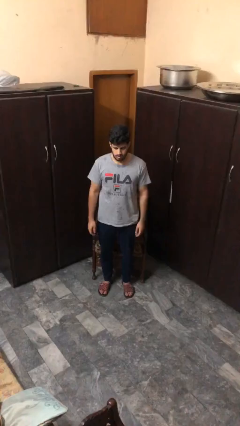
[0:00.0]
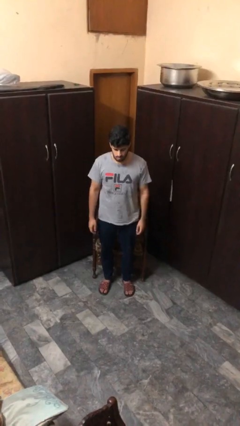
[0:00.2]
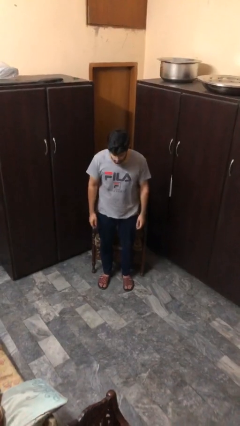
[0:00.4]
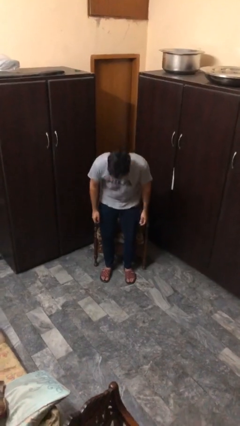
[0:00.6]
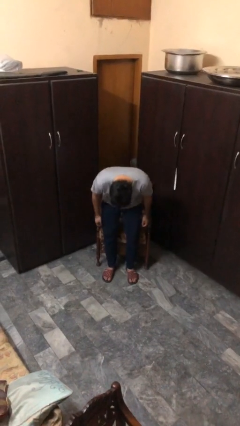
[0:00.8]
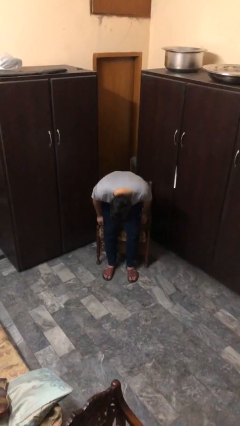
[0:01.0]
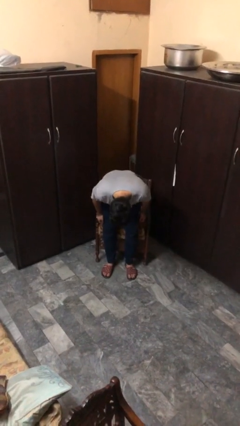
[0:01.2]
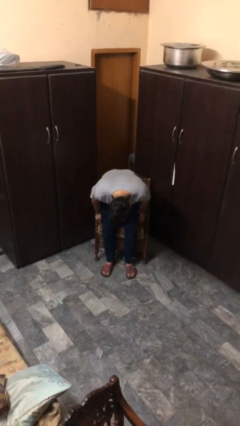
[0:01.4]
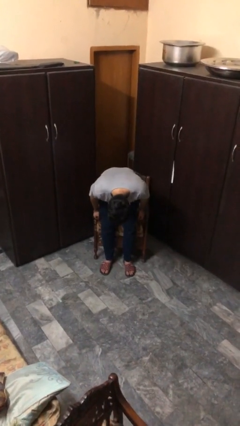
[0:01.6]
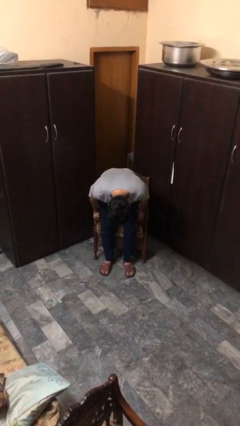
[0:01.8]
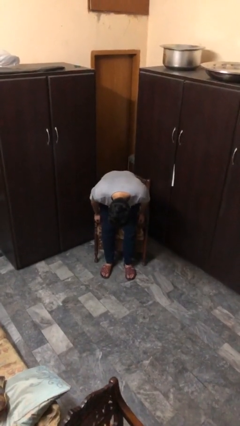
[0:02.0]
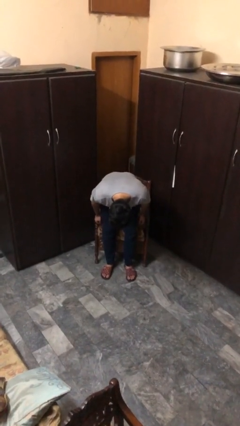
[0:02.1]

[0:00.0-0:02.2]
person bows

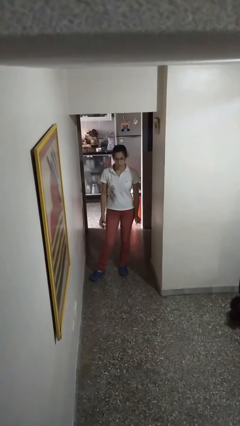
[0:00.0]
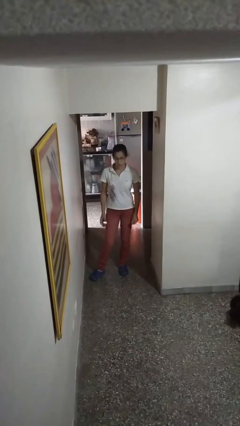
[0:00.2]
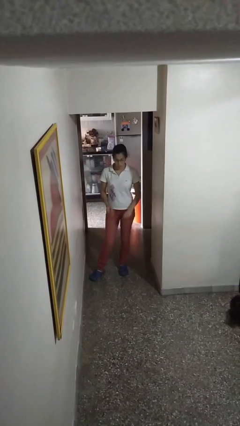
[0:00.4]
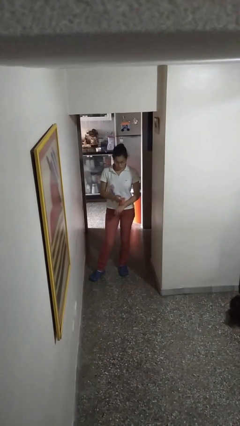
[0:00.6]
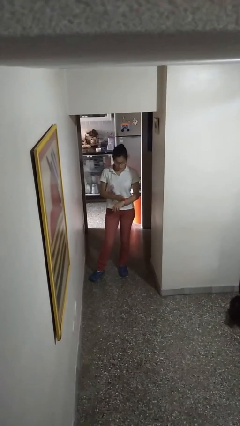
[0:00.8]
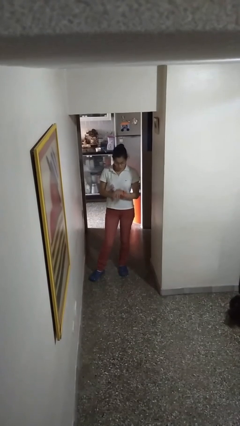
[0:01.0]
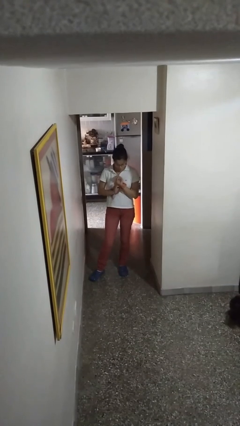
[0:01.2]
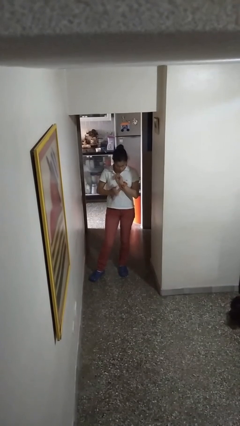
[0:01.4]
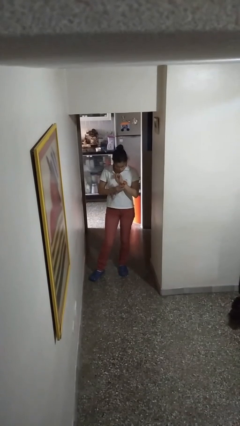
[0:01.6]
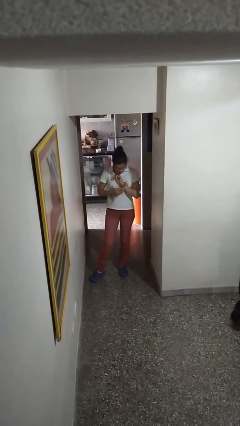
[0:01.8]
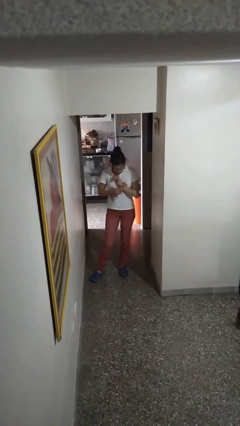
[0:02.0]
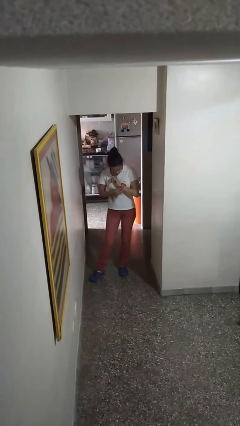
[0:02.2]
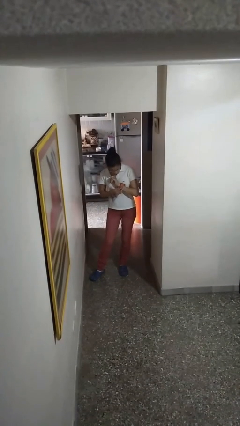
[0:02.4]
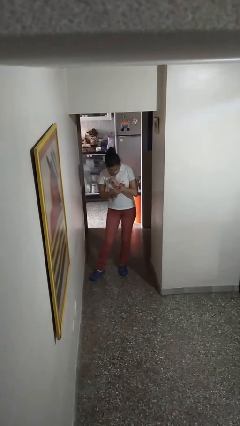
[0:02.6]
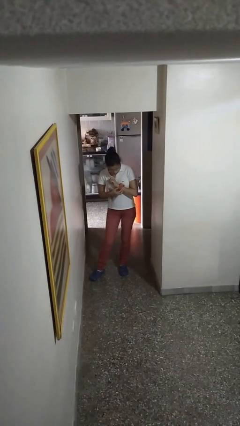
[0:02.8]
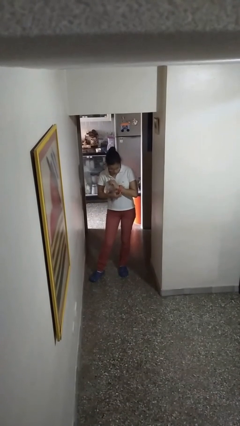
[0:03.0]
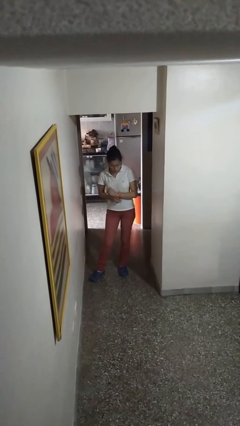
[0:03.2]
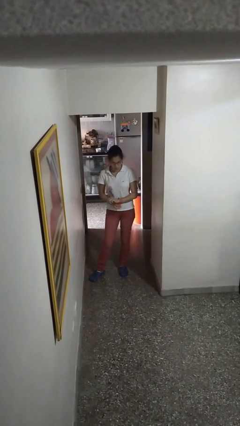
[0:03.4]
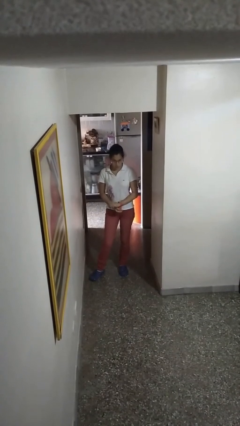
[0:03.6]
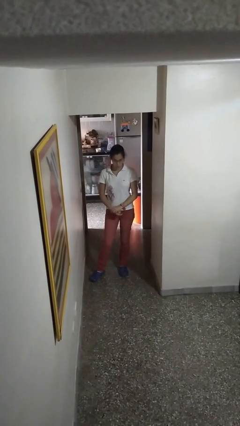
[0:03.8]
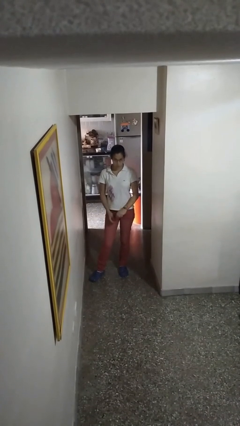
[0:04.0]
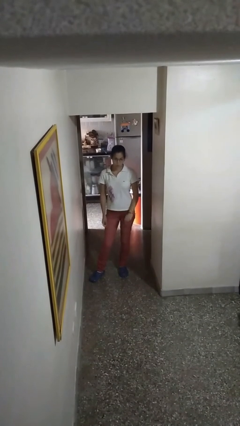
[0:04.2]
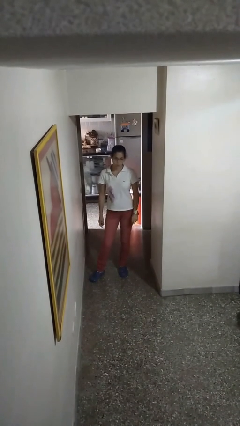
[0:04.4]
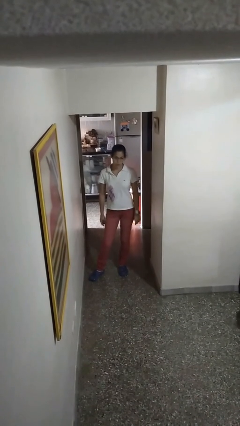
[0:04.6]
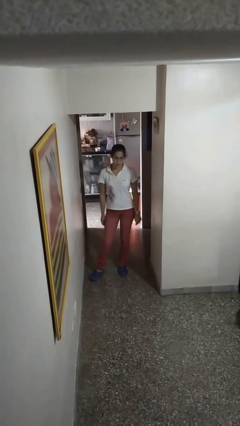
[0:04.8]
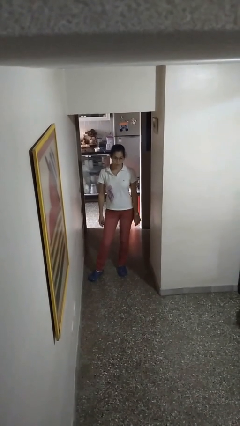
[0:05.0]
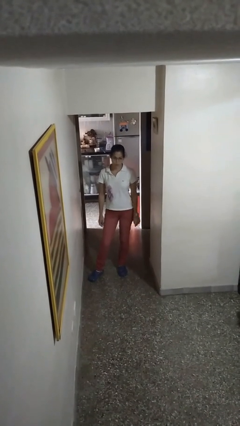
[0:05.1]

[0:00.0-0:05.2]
person puts on wristwatch

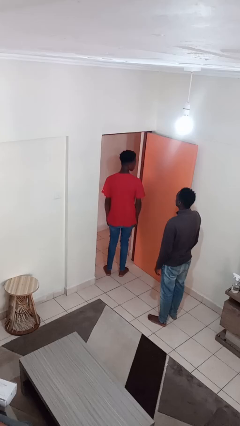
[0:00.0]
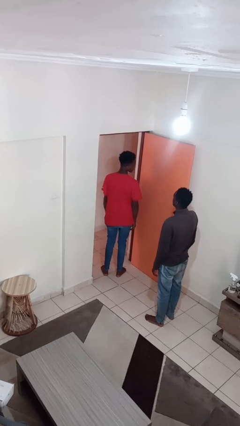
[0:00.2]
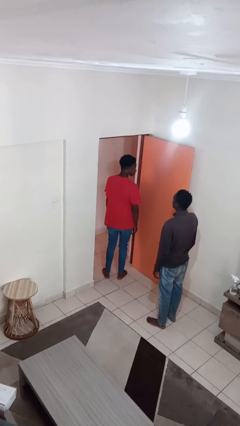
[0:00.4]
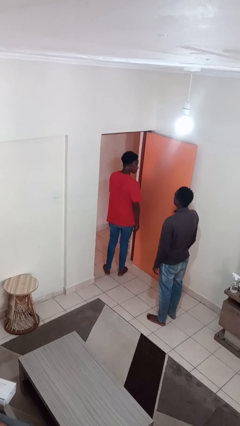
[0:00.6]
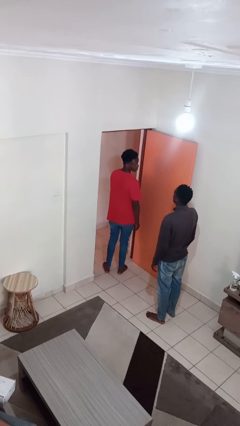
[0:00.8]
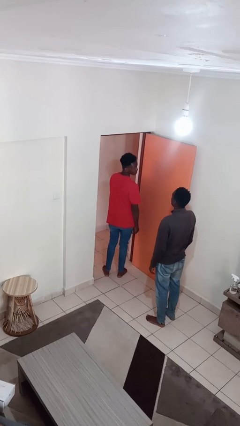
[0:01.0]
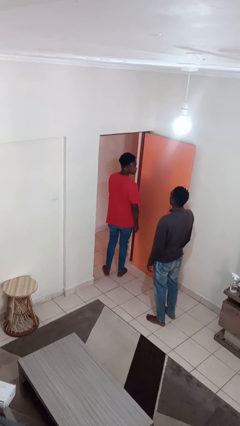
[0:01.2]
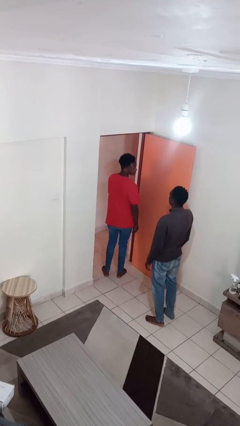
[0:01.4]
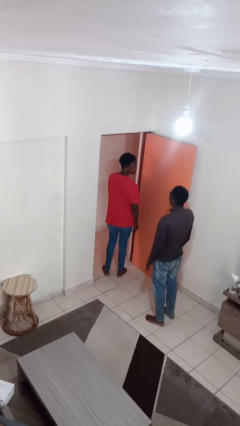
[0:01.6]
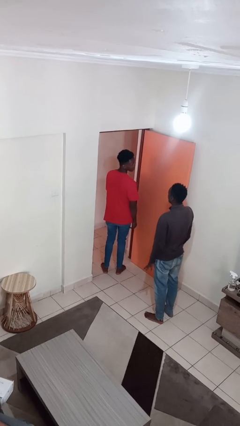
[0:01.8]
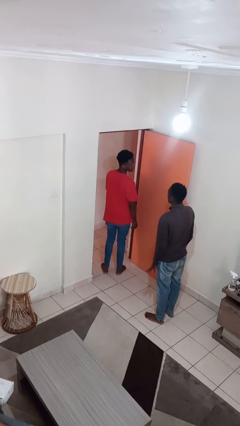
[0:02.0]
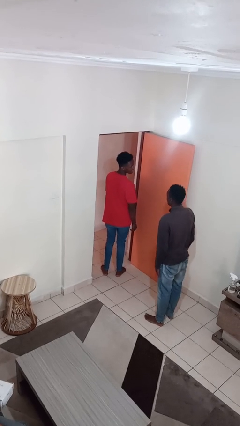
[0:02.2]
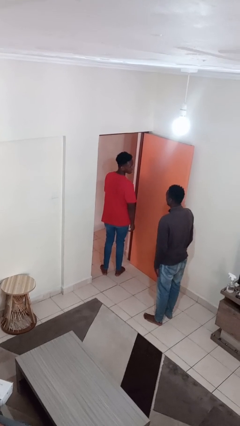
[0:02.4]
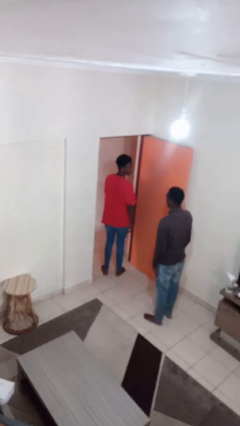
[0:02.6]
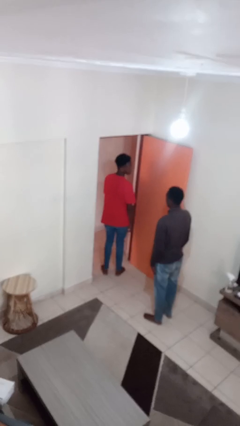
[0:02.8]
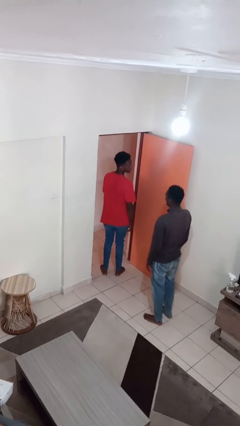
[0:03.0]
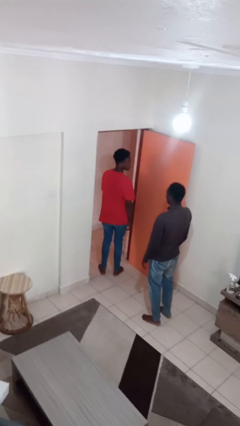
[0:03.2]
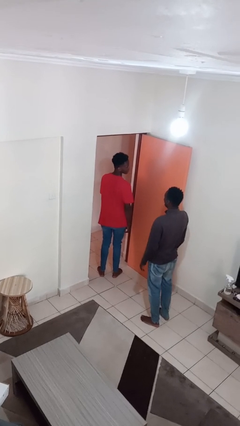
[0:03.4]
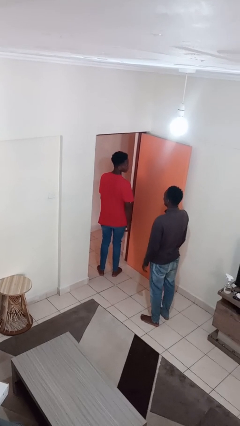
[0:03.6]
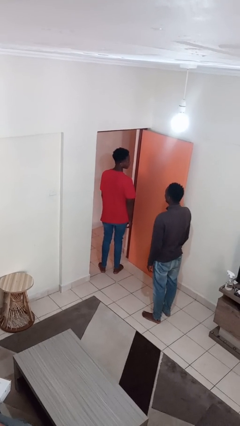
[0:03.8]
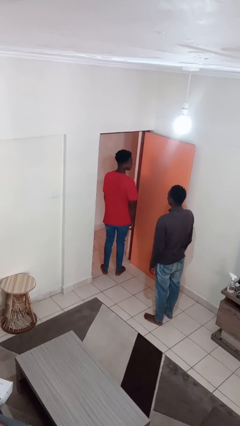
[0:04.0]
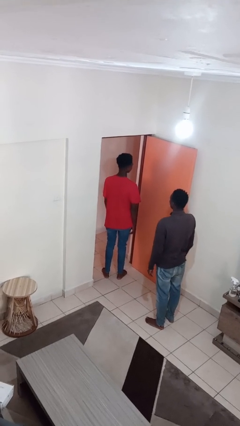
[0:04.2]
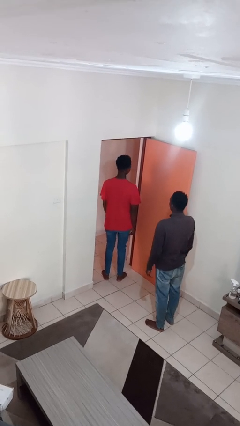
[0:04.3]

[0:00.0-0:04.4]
person looks over shoulder

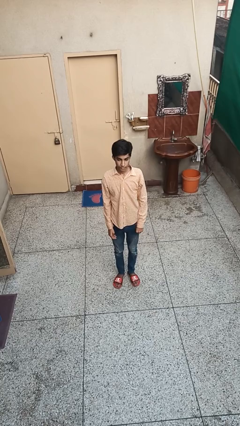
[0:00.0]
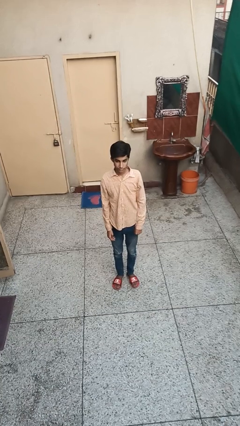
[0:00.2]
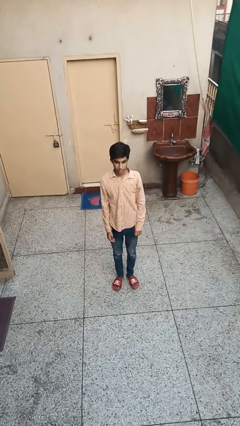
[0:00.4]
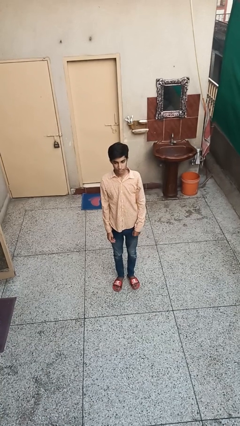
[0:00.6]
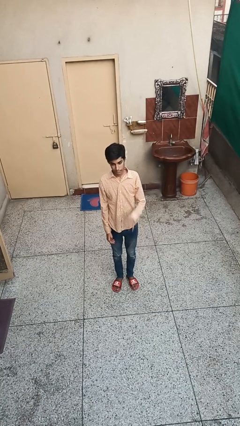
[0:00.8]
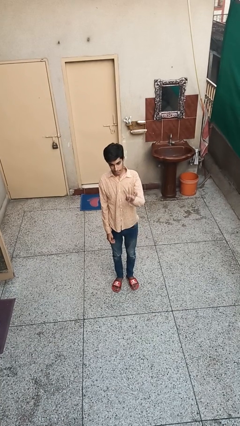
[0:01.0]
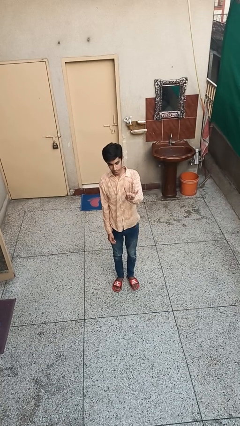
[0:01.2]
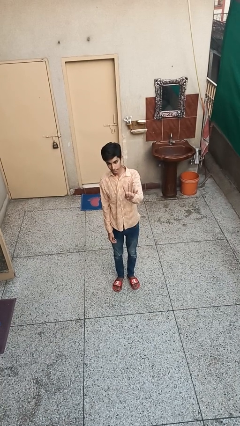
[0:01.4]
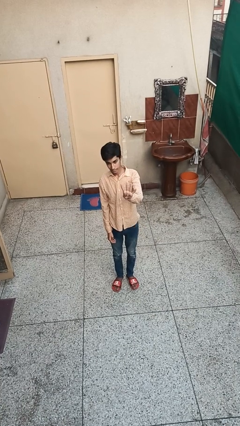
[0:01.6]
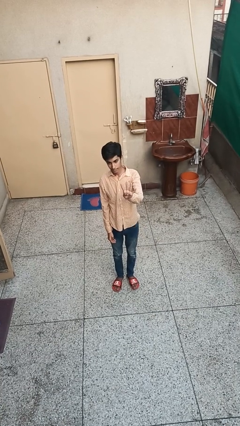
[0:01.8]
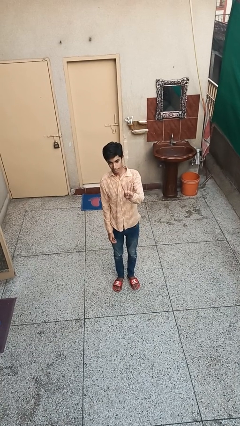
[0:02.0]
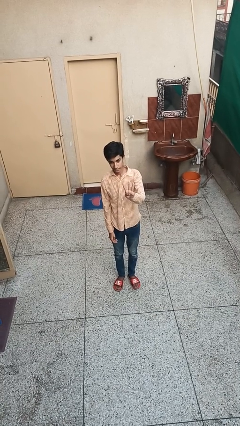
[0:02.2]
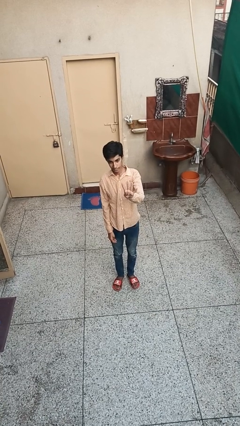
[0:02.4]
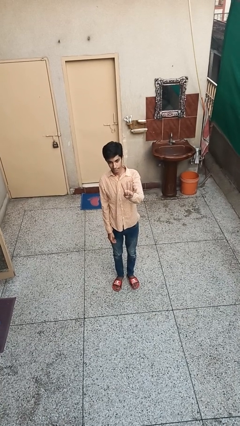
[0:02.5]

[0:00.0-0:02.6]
person gestures number four

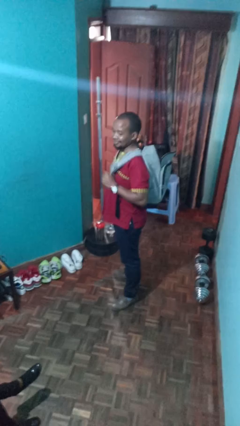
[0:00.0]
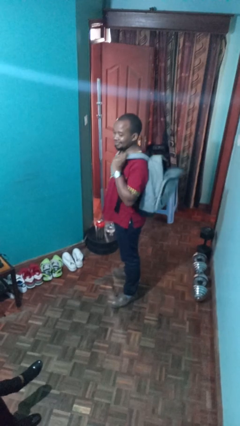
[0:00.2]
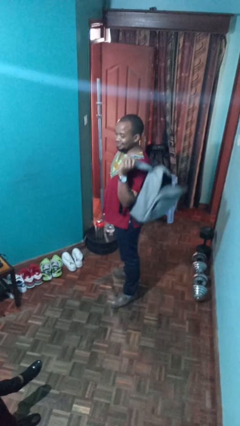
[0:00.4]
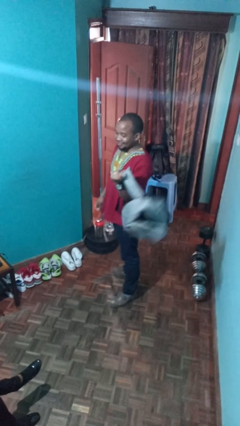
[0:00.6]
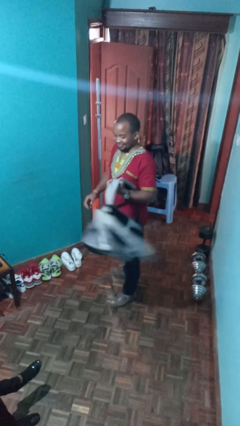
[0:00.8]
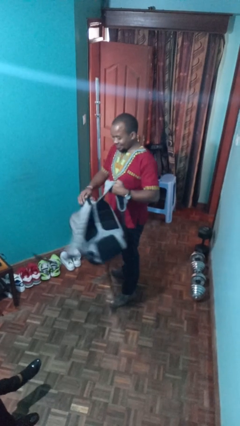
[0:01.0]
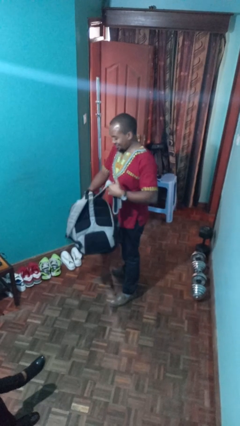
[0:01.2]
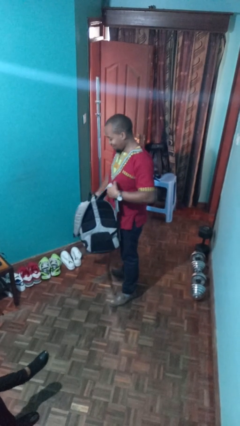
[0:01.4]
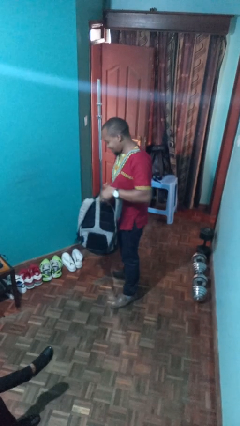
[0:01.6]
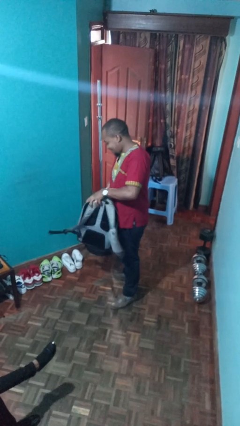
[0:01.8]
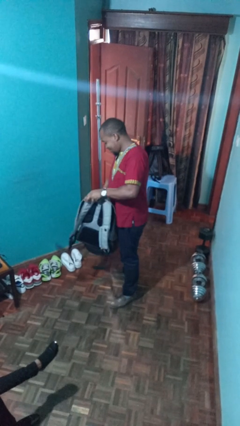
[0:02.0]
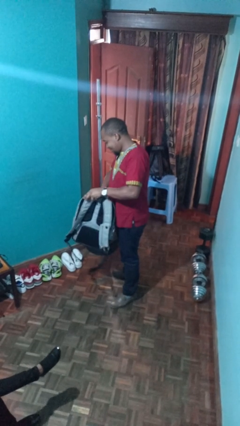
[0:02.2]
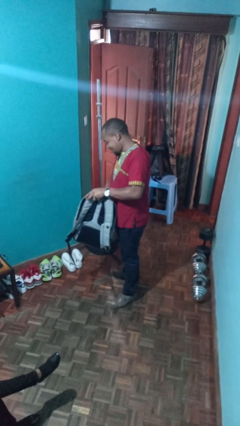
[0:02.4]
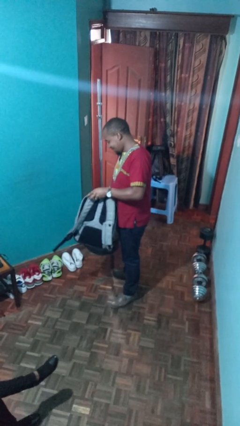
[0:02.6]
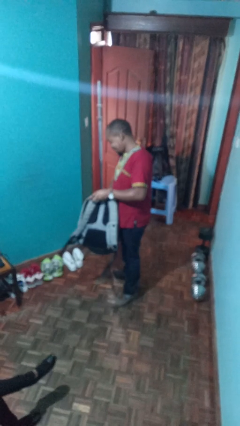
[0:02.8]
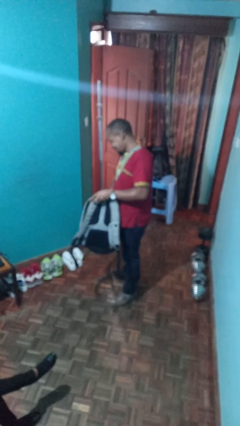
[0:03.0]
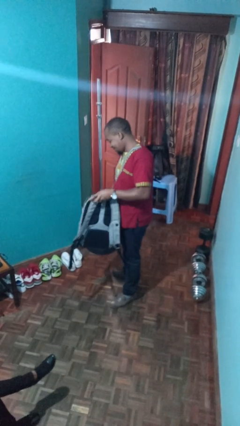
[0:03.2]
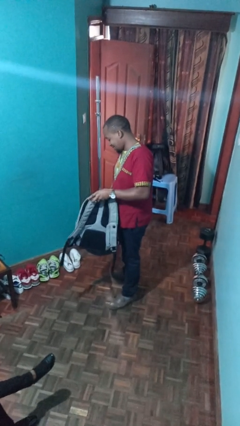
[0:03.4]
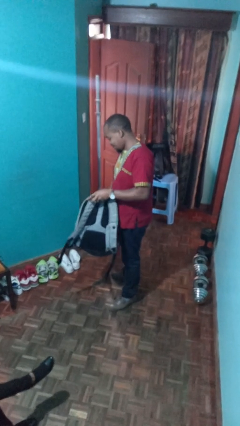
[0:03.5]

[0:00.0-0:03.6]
person searches in backpack
